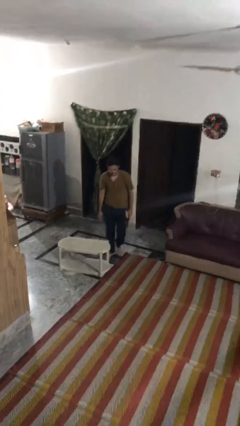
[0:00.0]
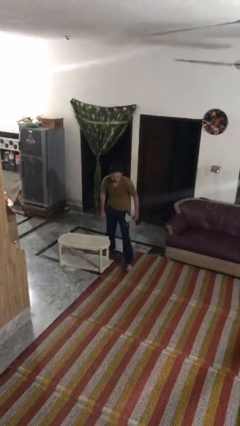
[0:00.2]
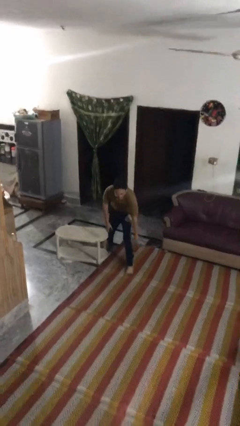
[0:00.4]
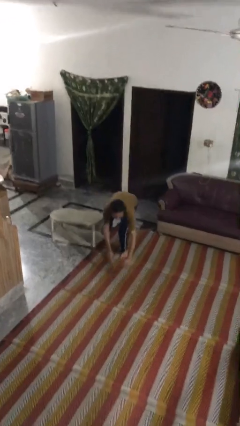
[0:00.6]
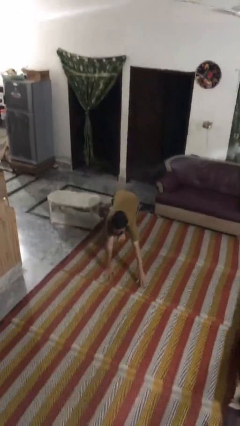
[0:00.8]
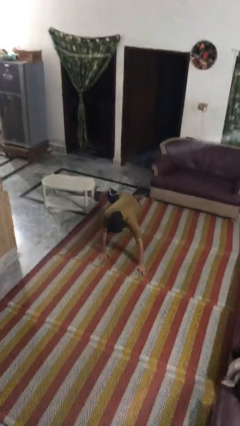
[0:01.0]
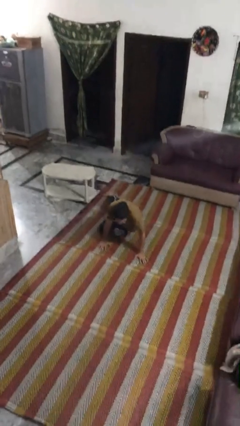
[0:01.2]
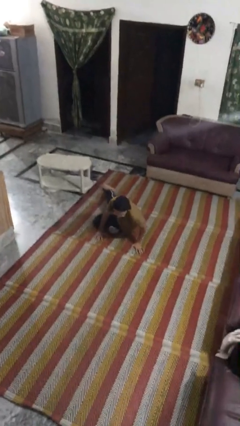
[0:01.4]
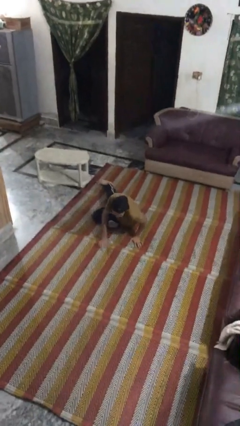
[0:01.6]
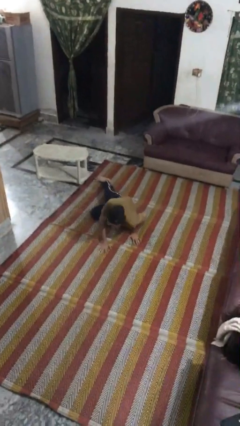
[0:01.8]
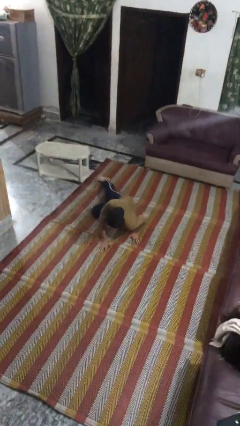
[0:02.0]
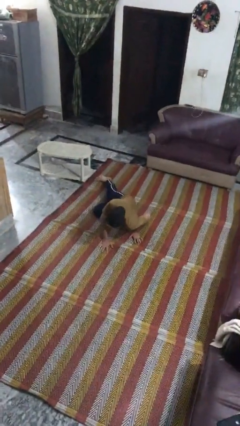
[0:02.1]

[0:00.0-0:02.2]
person trips on object on floor

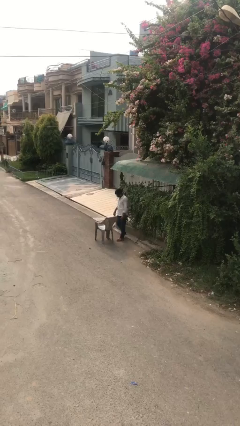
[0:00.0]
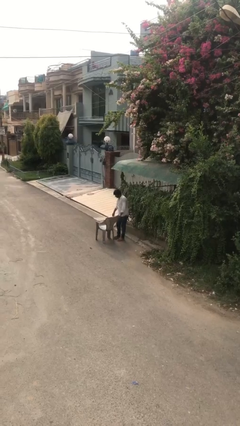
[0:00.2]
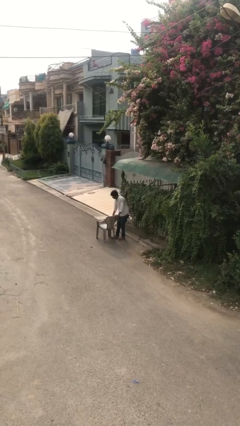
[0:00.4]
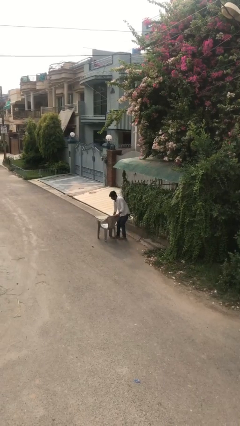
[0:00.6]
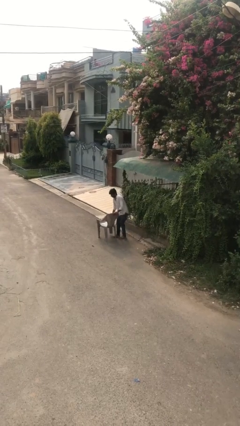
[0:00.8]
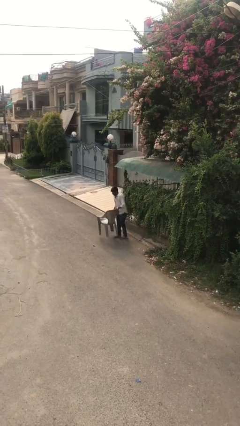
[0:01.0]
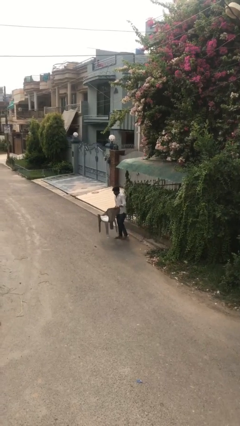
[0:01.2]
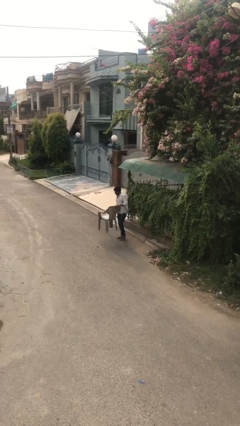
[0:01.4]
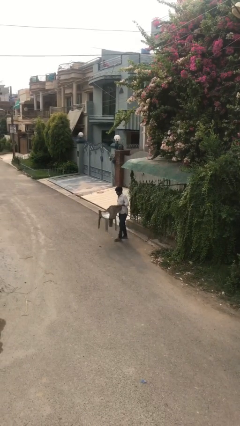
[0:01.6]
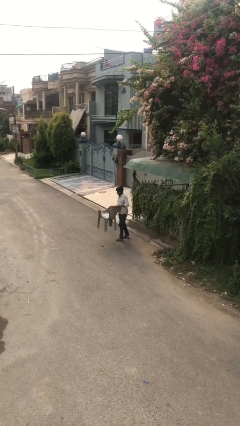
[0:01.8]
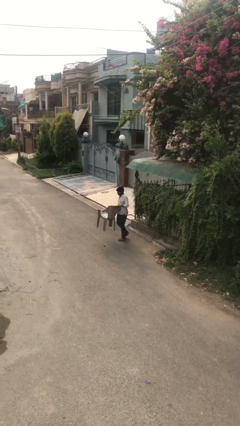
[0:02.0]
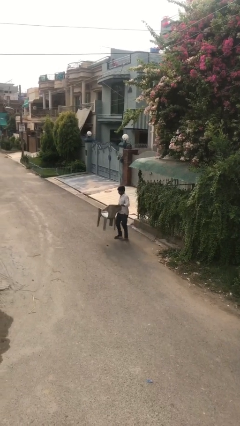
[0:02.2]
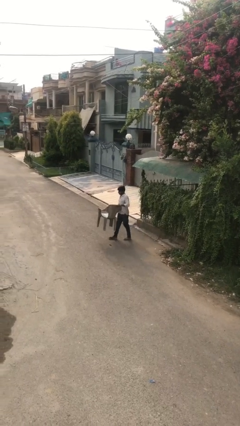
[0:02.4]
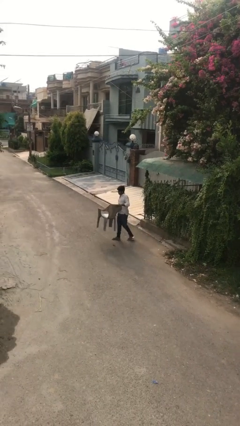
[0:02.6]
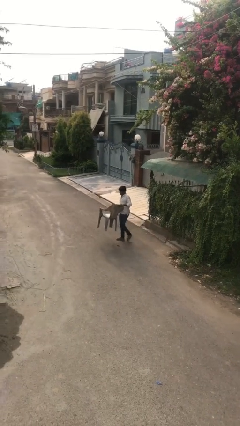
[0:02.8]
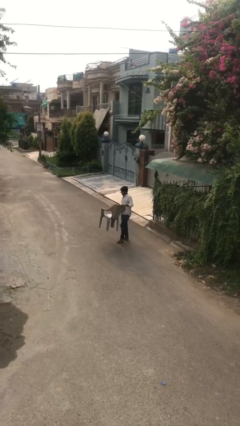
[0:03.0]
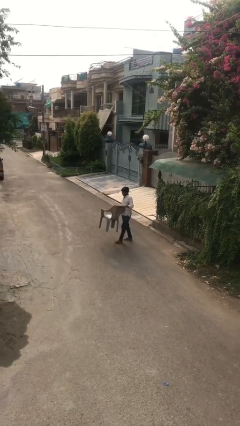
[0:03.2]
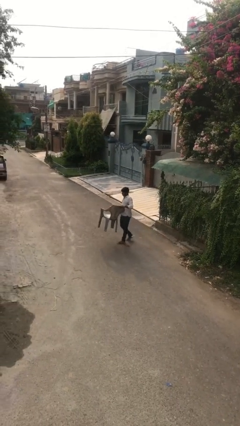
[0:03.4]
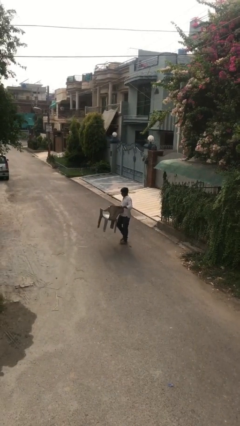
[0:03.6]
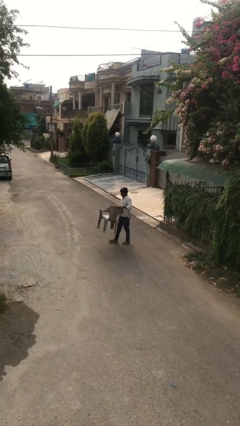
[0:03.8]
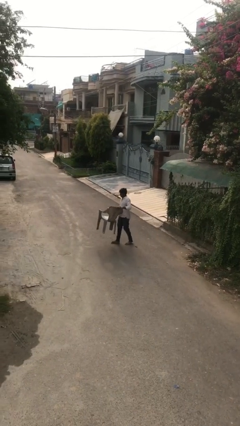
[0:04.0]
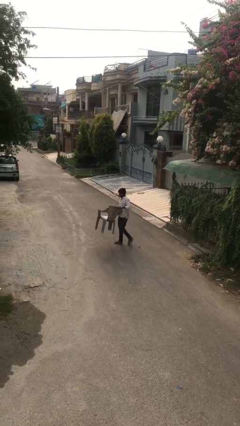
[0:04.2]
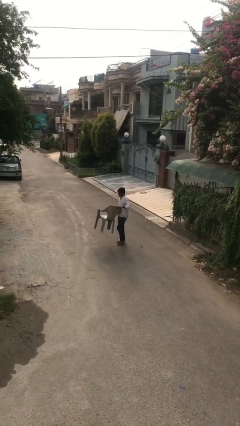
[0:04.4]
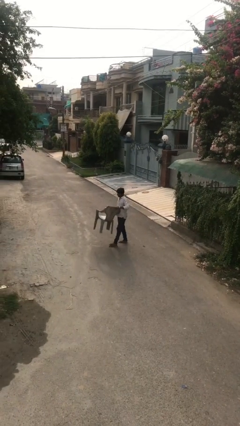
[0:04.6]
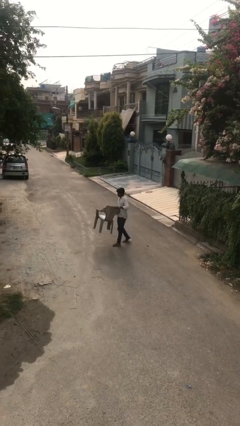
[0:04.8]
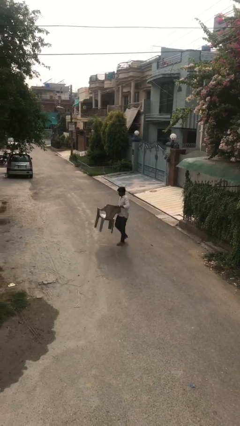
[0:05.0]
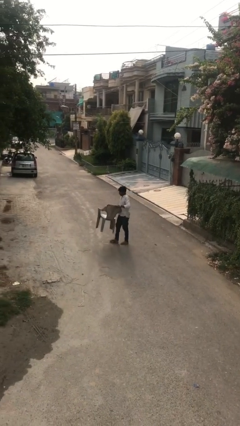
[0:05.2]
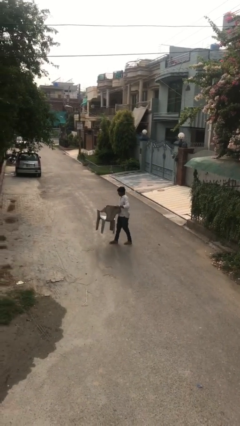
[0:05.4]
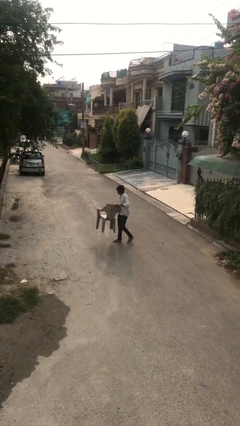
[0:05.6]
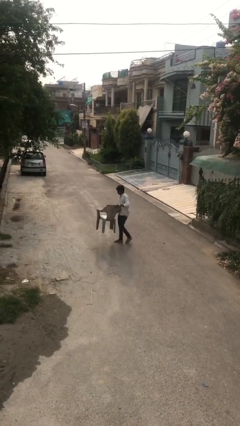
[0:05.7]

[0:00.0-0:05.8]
person carries heavy object

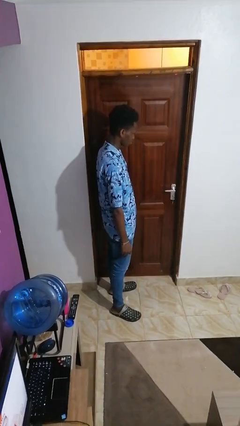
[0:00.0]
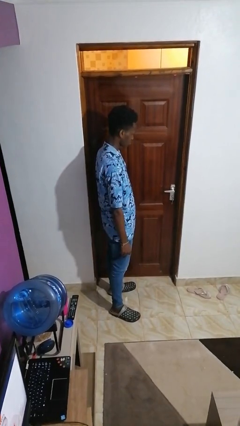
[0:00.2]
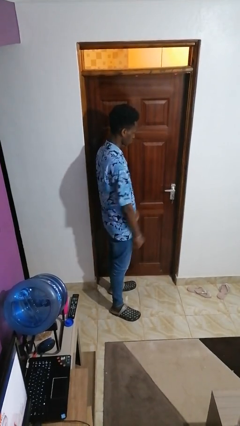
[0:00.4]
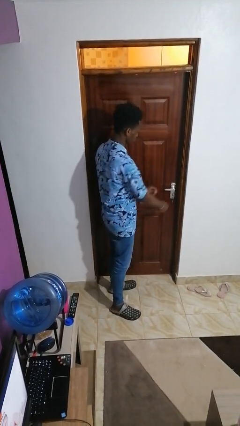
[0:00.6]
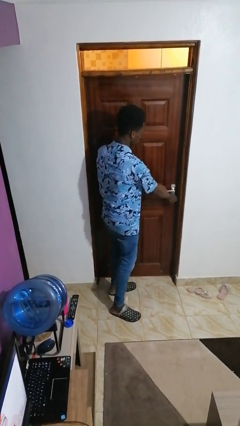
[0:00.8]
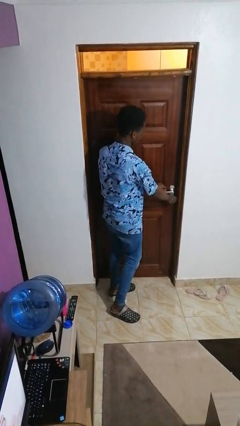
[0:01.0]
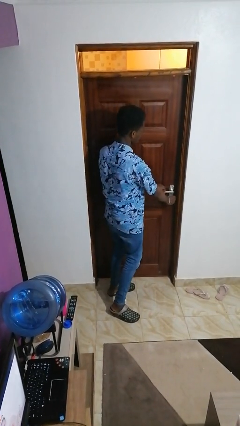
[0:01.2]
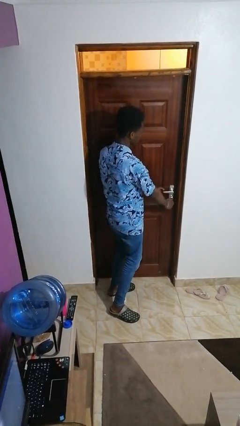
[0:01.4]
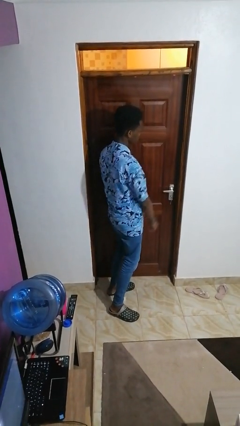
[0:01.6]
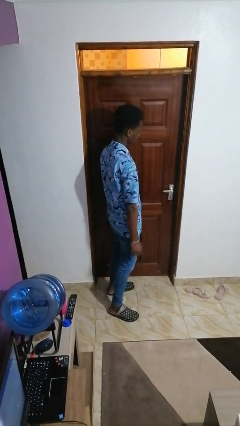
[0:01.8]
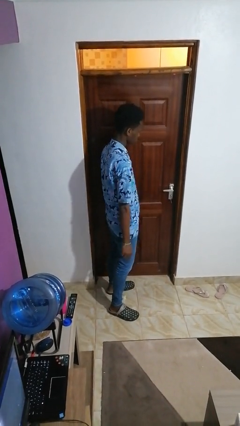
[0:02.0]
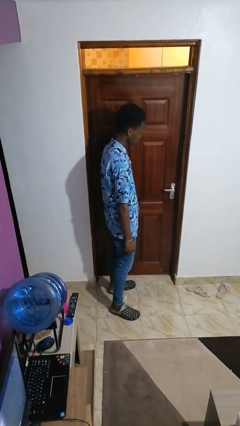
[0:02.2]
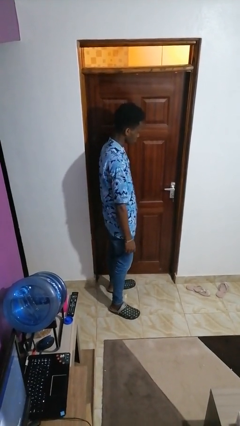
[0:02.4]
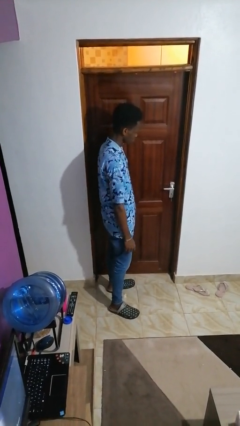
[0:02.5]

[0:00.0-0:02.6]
person unlocks door with keys

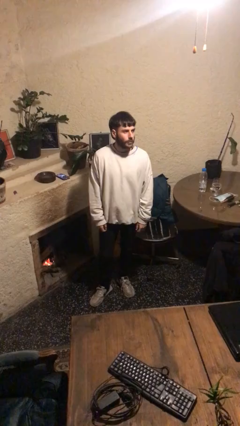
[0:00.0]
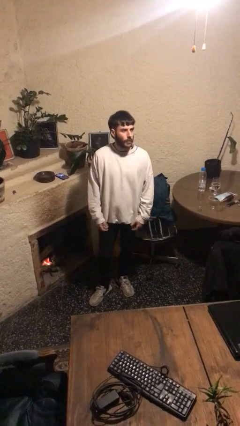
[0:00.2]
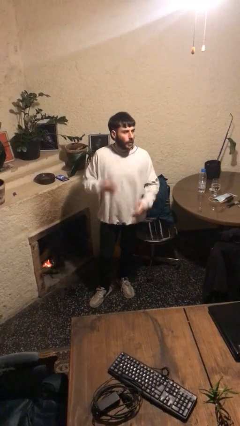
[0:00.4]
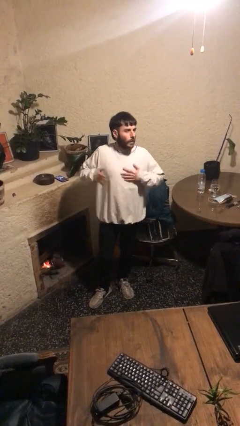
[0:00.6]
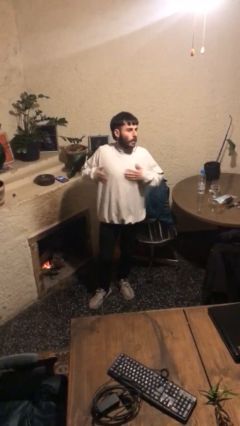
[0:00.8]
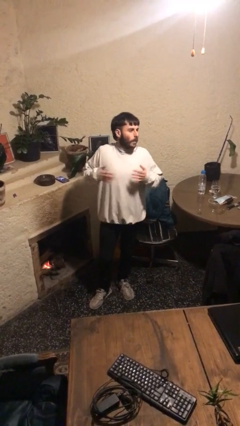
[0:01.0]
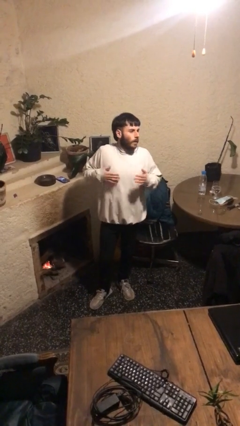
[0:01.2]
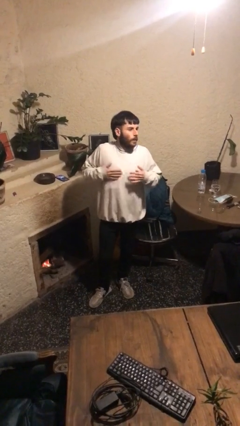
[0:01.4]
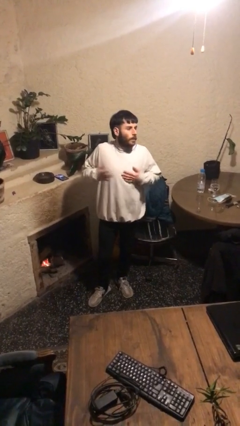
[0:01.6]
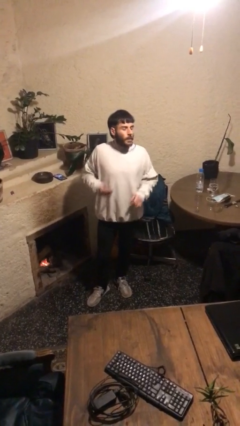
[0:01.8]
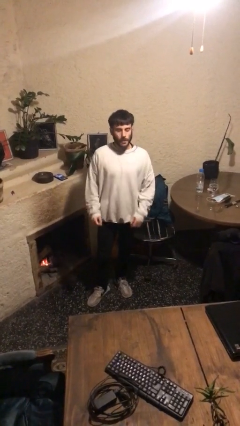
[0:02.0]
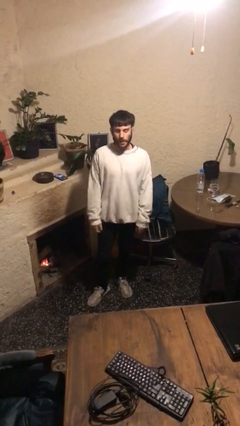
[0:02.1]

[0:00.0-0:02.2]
person drums on chest

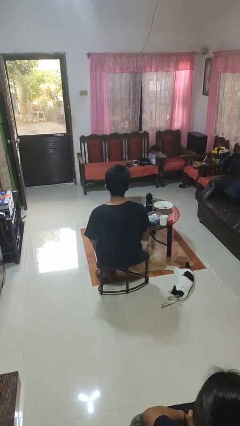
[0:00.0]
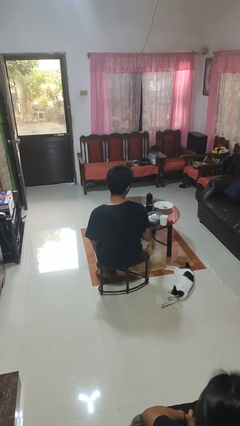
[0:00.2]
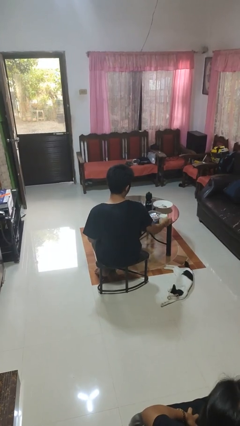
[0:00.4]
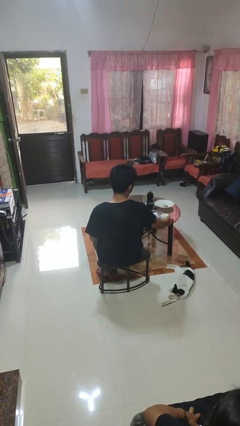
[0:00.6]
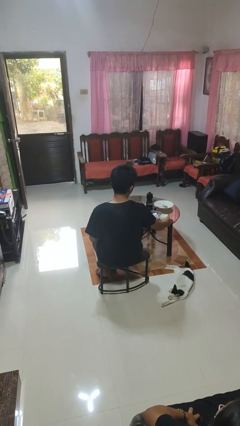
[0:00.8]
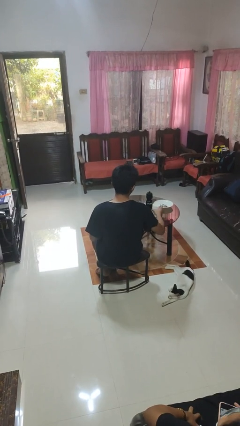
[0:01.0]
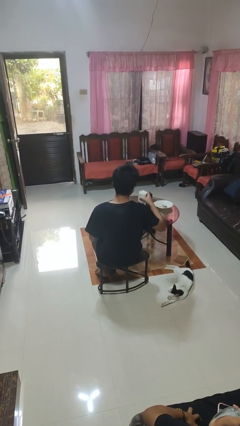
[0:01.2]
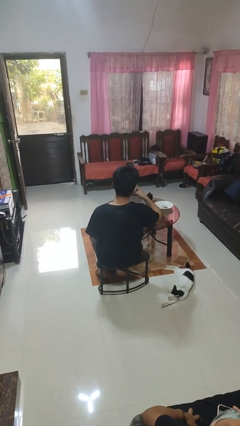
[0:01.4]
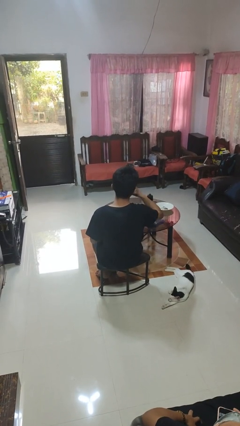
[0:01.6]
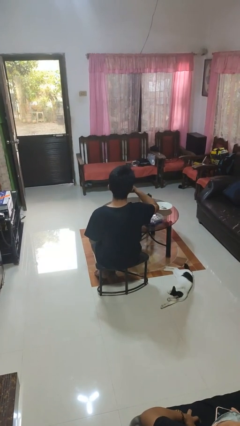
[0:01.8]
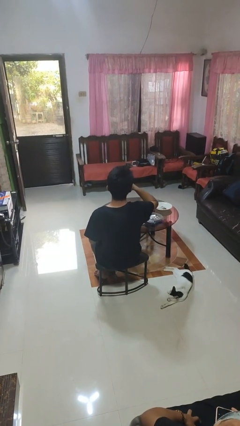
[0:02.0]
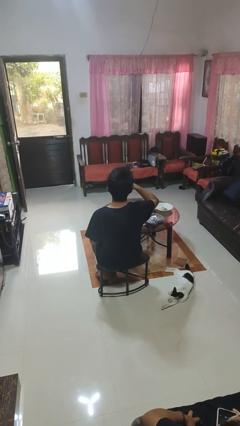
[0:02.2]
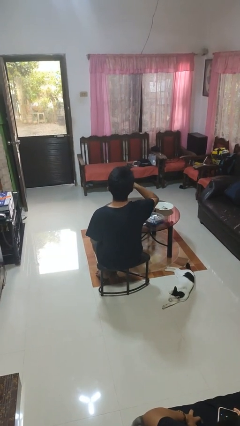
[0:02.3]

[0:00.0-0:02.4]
person drinks from cup

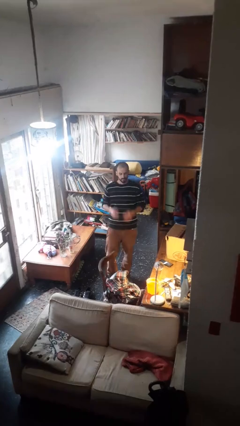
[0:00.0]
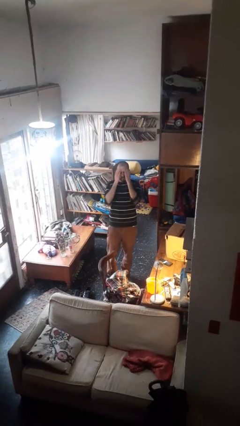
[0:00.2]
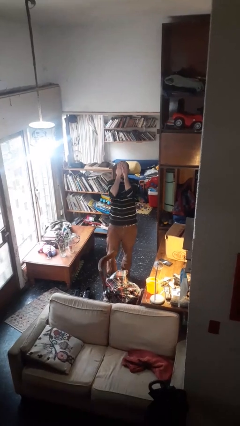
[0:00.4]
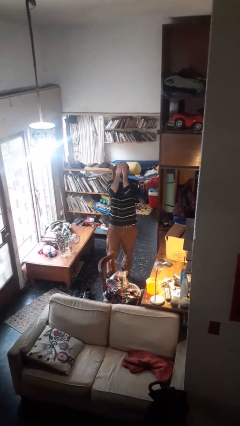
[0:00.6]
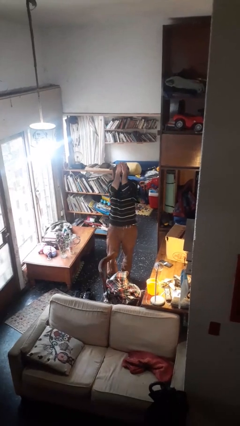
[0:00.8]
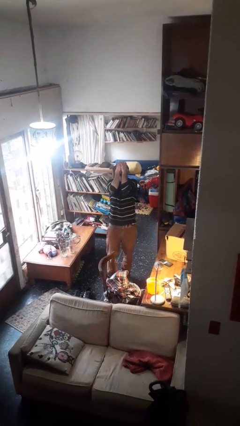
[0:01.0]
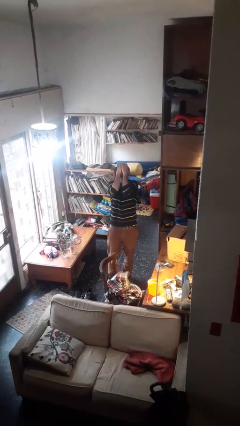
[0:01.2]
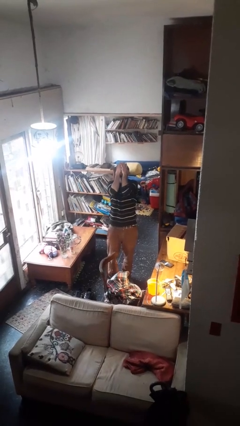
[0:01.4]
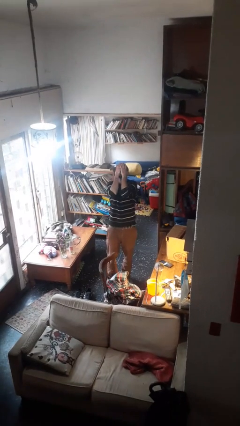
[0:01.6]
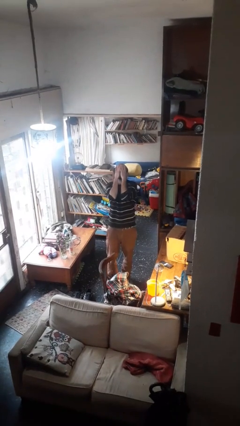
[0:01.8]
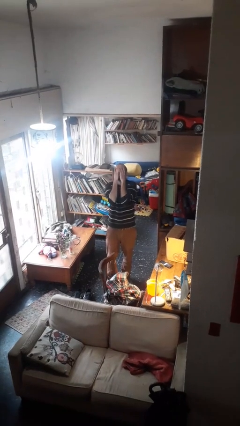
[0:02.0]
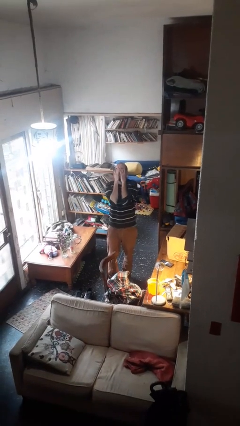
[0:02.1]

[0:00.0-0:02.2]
person covers face with hands
